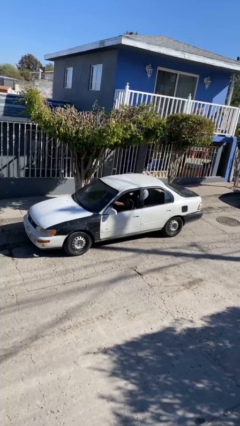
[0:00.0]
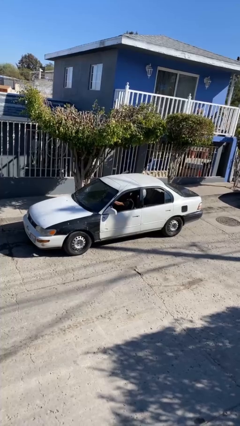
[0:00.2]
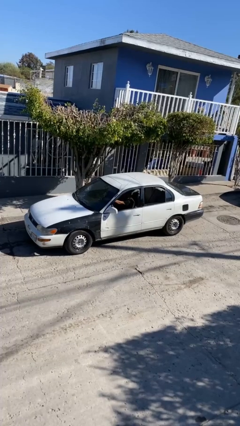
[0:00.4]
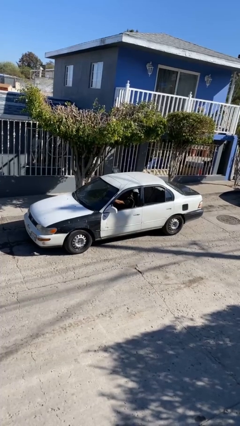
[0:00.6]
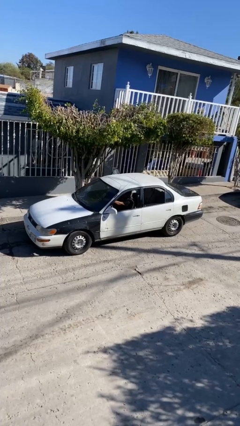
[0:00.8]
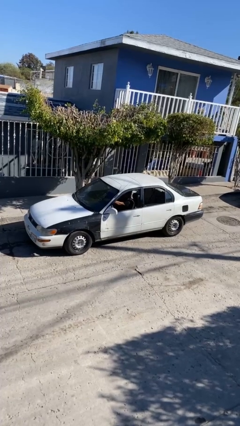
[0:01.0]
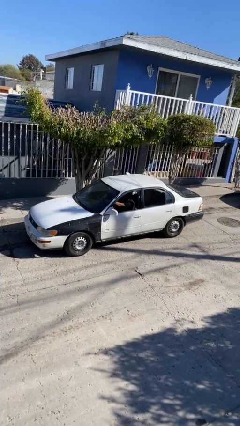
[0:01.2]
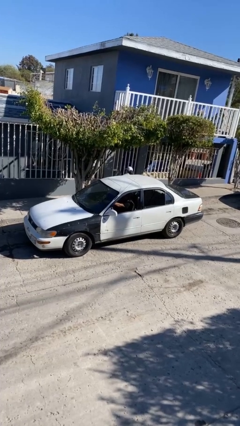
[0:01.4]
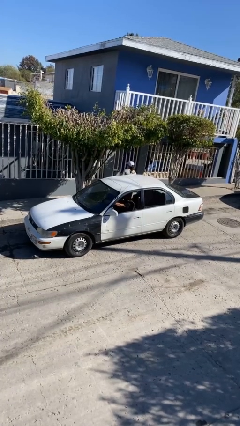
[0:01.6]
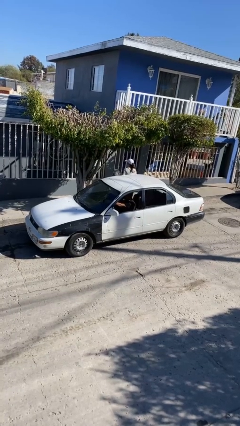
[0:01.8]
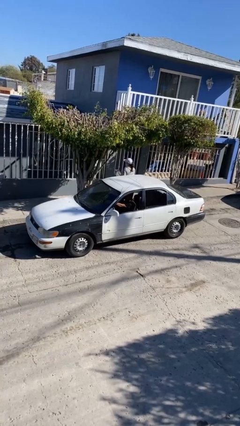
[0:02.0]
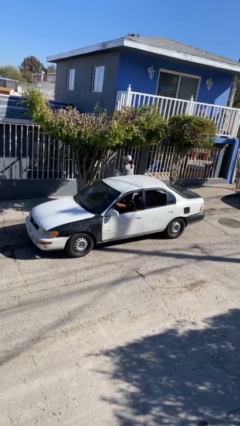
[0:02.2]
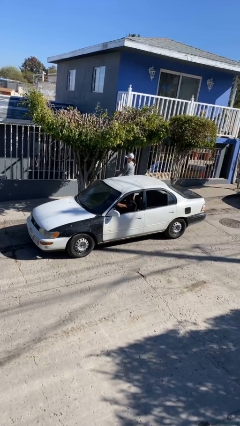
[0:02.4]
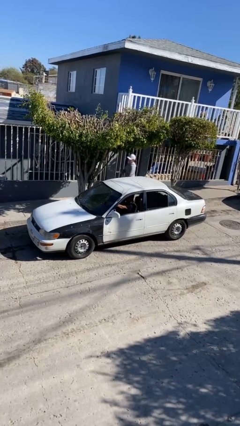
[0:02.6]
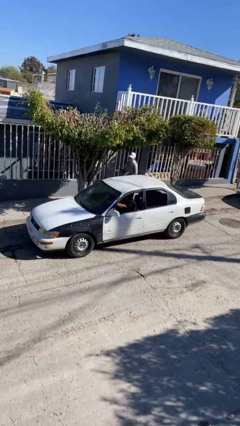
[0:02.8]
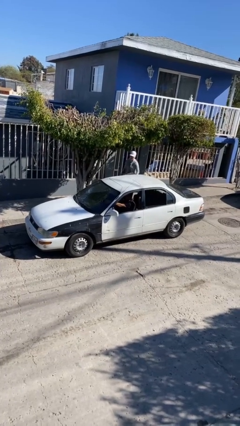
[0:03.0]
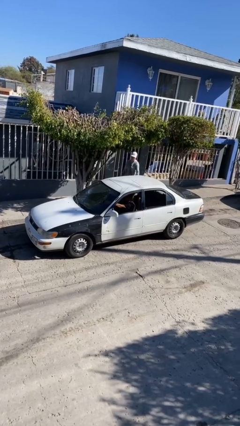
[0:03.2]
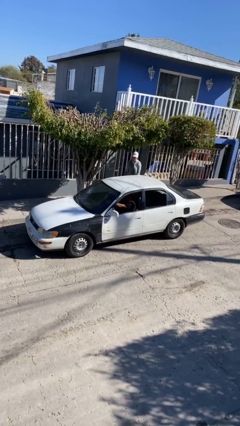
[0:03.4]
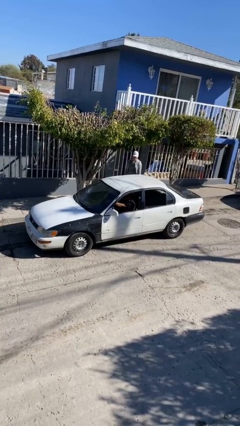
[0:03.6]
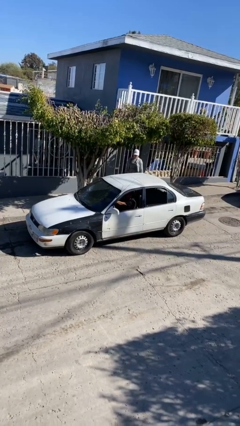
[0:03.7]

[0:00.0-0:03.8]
car drops off person

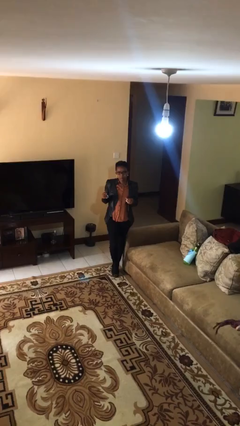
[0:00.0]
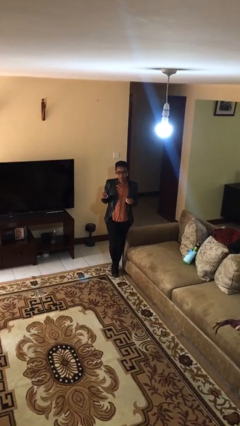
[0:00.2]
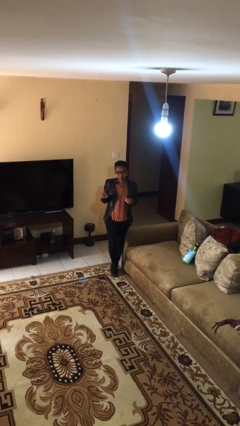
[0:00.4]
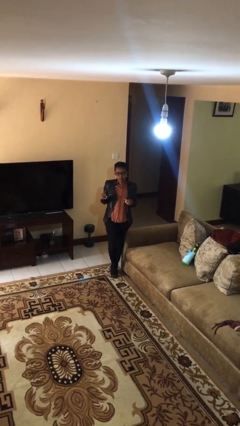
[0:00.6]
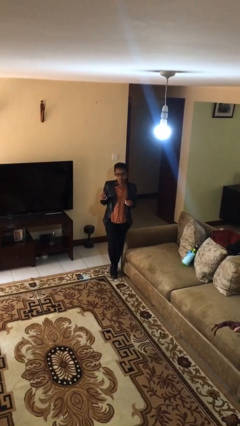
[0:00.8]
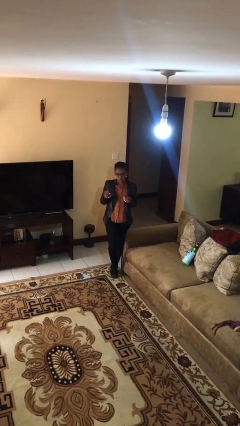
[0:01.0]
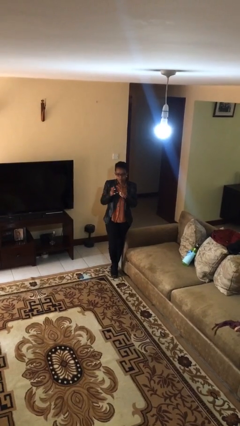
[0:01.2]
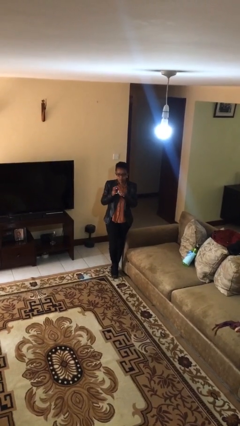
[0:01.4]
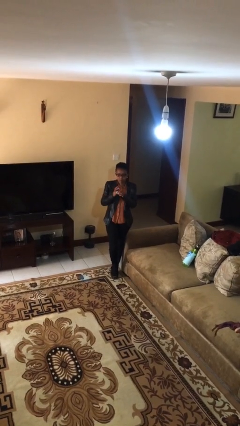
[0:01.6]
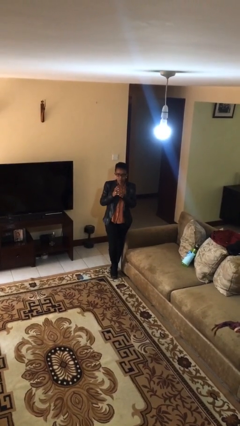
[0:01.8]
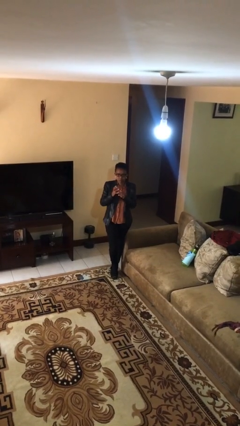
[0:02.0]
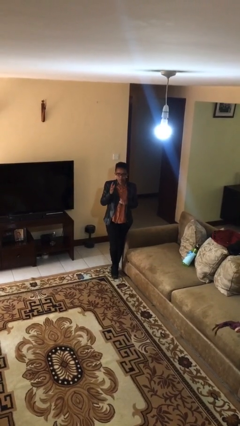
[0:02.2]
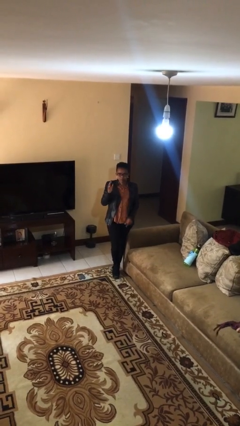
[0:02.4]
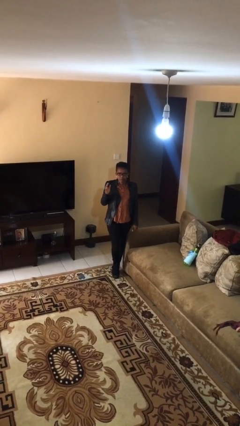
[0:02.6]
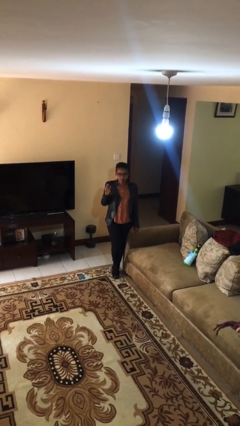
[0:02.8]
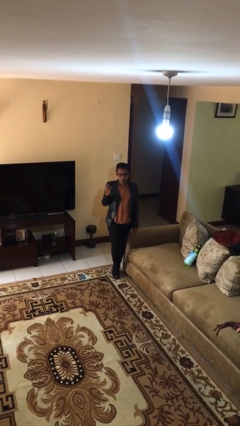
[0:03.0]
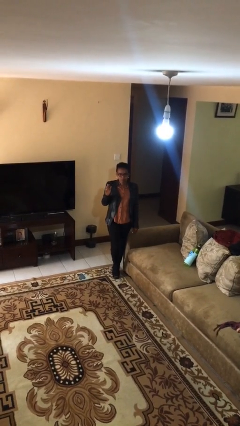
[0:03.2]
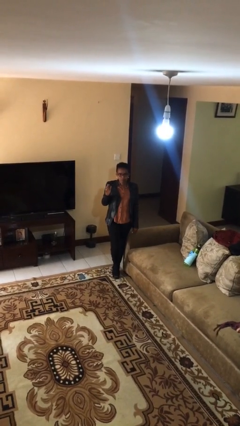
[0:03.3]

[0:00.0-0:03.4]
person puts on ring

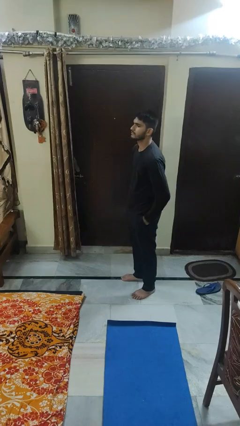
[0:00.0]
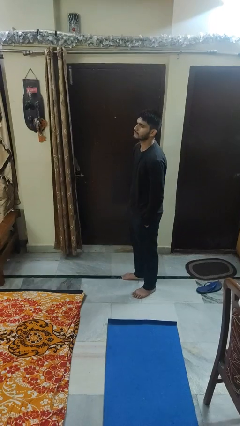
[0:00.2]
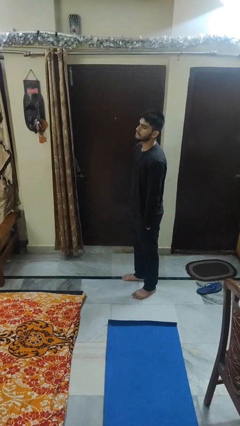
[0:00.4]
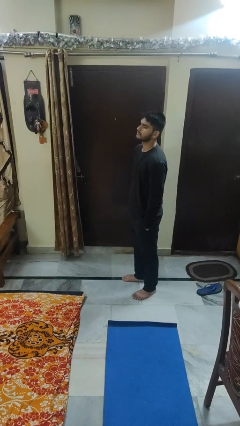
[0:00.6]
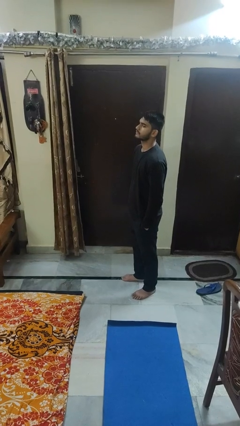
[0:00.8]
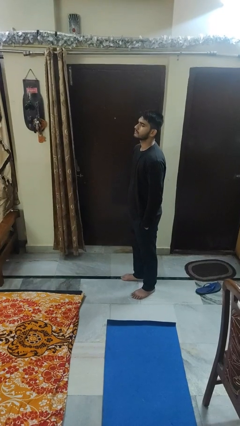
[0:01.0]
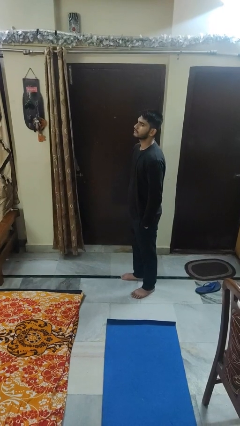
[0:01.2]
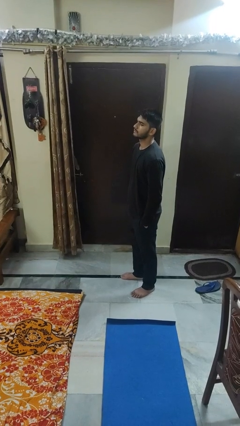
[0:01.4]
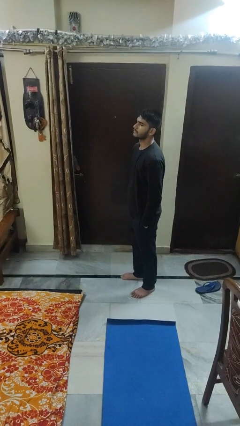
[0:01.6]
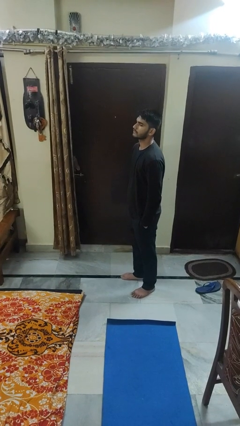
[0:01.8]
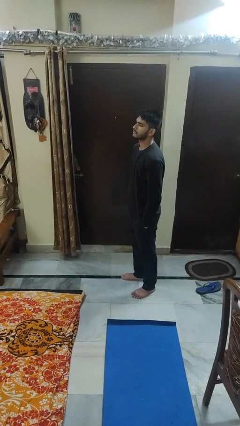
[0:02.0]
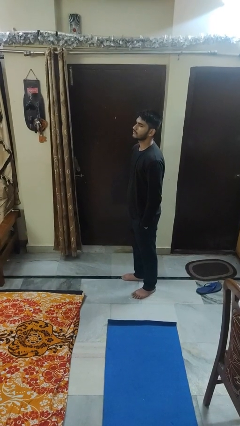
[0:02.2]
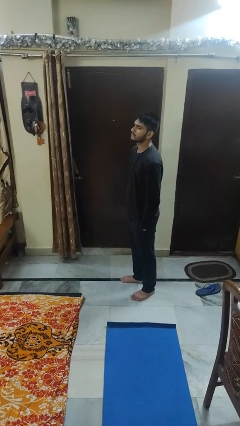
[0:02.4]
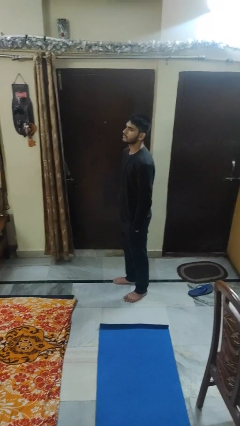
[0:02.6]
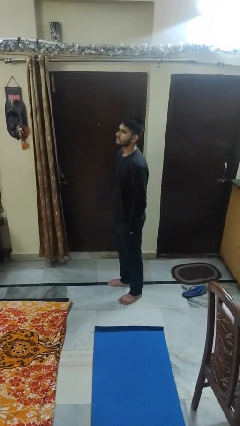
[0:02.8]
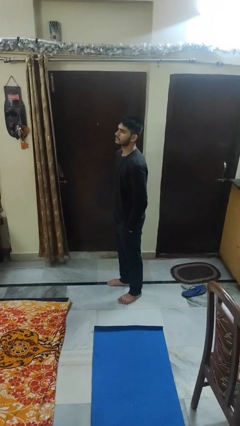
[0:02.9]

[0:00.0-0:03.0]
person puts hands in back pockets

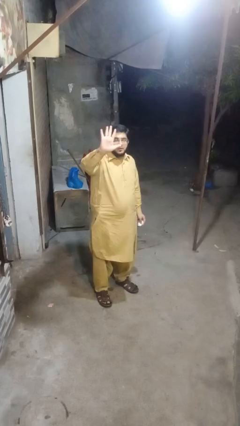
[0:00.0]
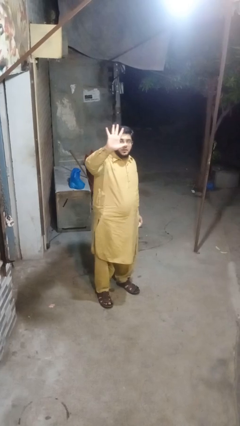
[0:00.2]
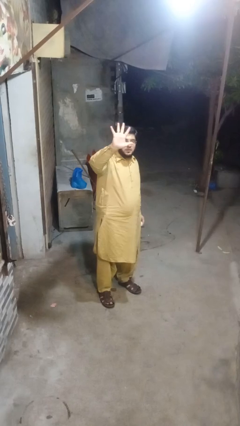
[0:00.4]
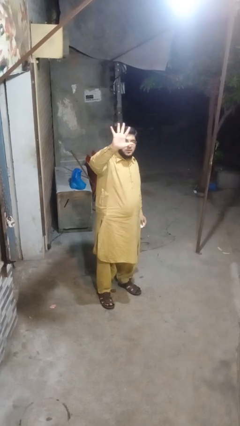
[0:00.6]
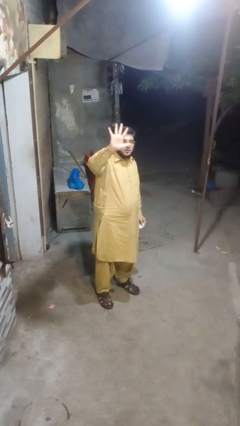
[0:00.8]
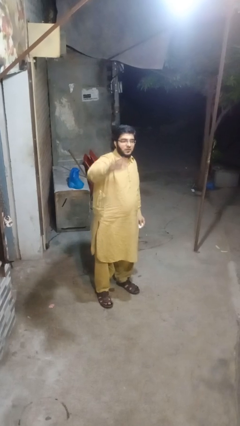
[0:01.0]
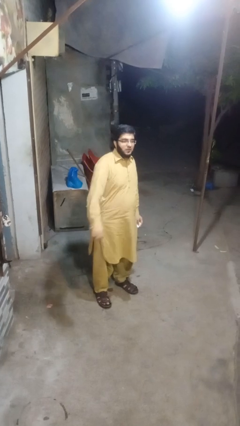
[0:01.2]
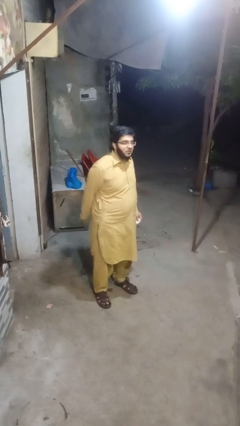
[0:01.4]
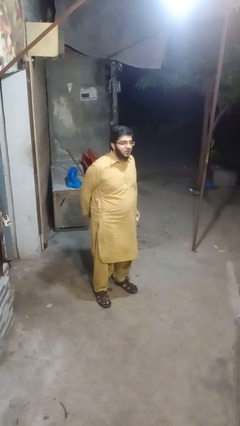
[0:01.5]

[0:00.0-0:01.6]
person gestures number five

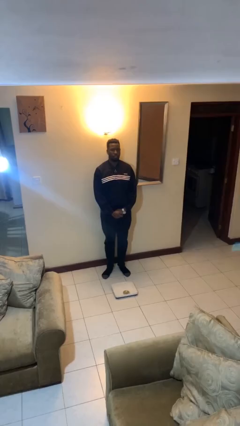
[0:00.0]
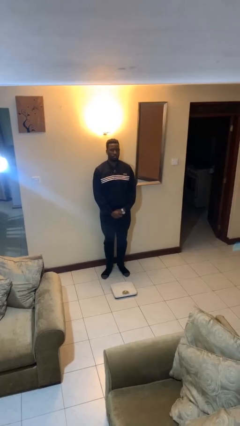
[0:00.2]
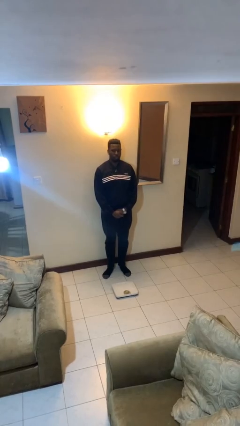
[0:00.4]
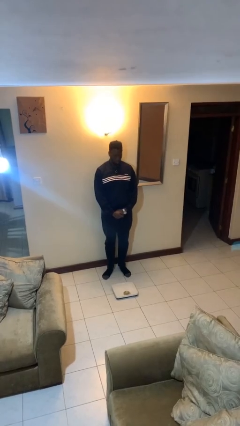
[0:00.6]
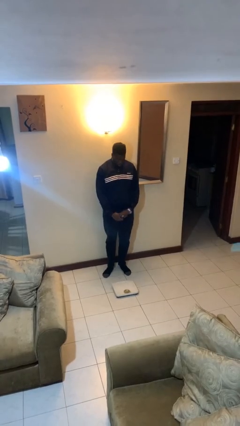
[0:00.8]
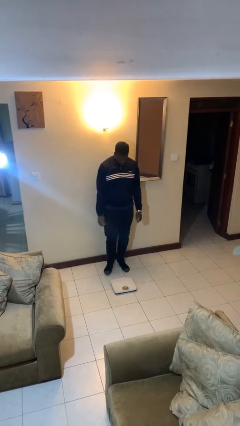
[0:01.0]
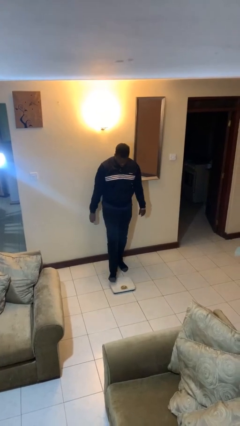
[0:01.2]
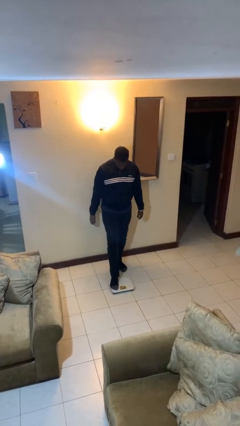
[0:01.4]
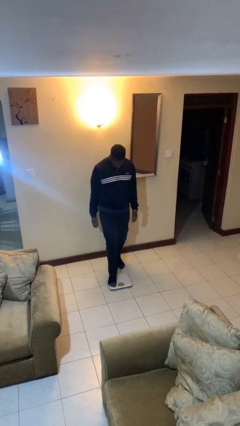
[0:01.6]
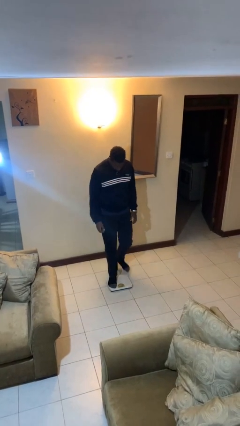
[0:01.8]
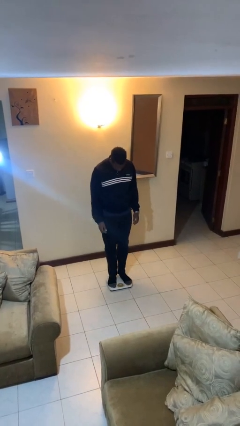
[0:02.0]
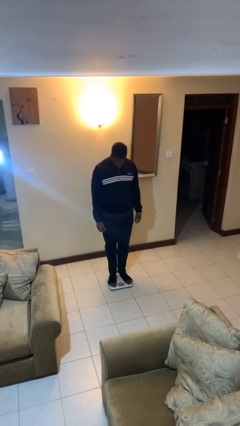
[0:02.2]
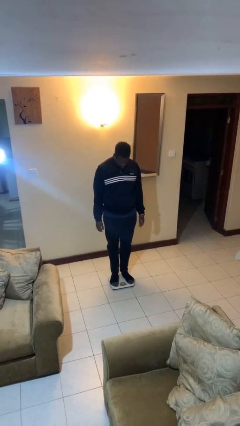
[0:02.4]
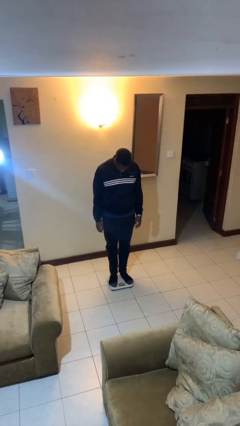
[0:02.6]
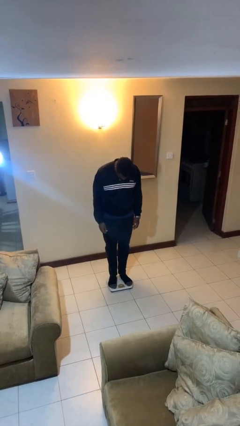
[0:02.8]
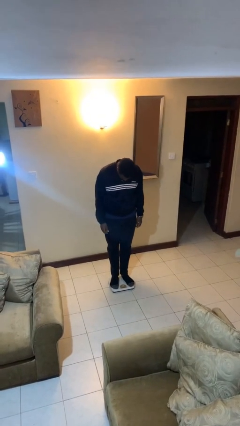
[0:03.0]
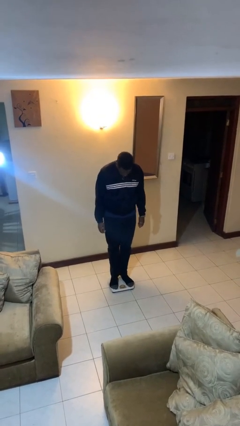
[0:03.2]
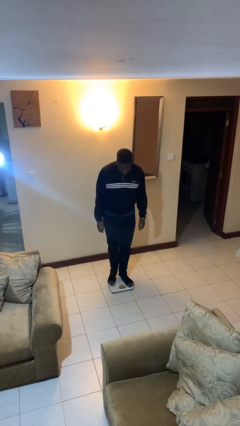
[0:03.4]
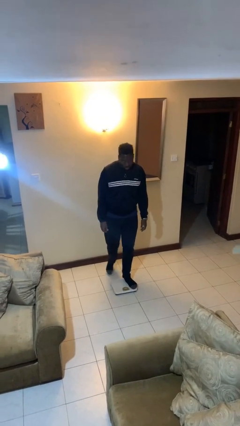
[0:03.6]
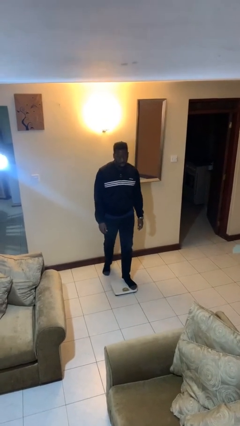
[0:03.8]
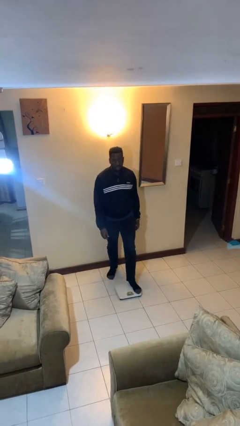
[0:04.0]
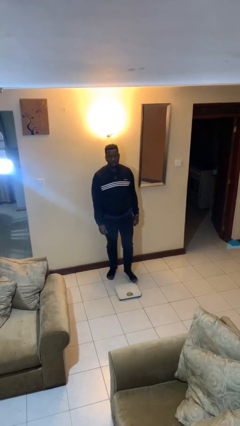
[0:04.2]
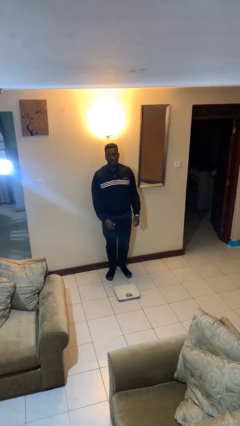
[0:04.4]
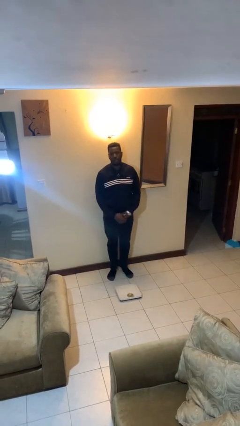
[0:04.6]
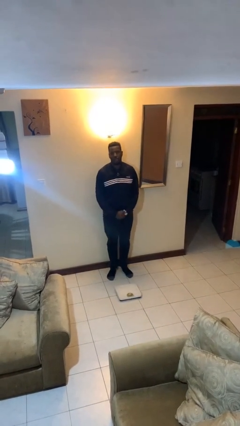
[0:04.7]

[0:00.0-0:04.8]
person uses bodyweight scale

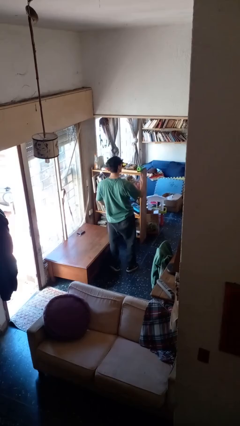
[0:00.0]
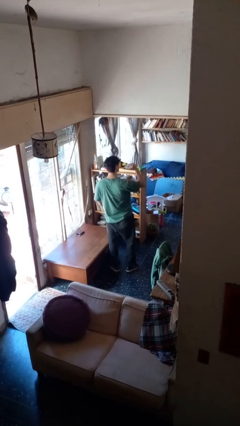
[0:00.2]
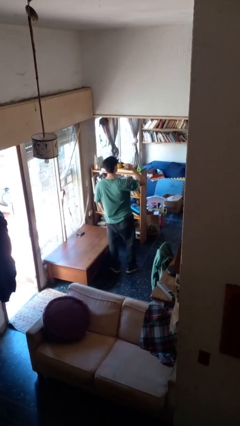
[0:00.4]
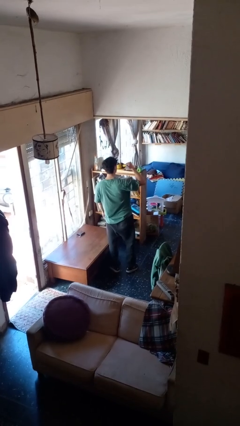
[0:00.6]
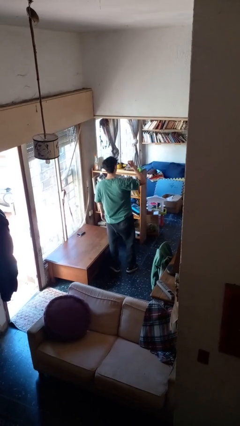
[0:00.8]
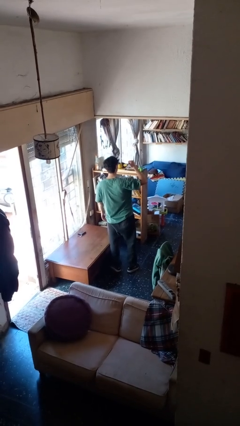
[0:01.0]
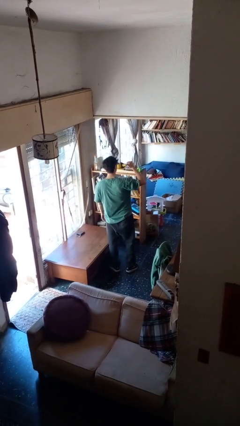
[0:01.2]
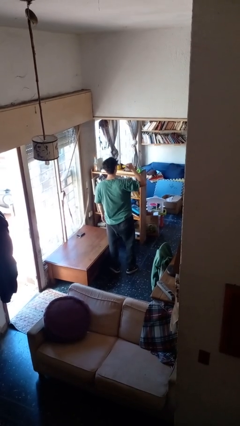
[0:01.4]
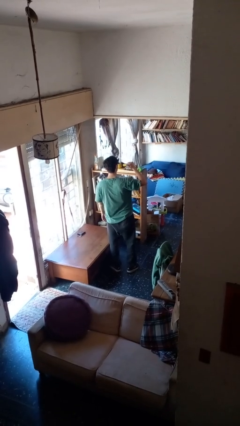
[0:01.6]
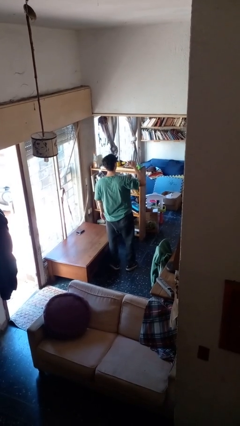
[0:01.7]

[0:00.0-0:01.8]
person gestures behind me
